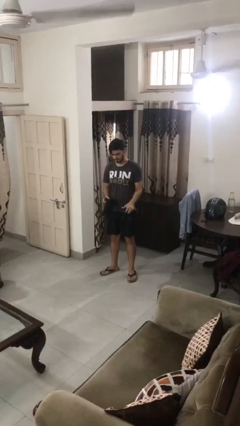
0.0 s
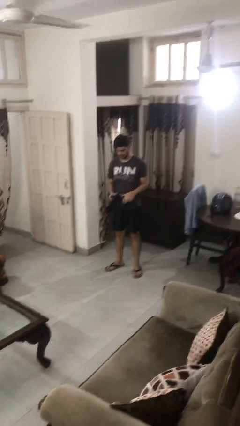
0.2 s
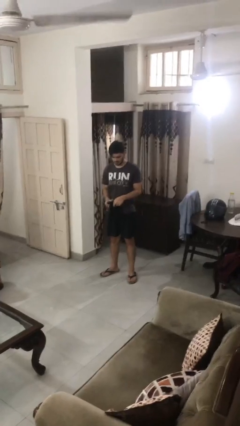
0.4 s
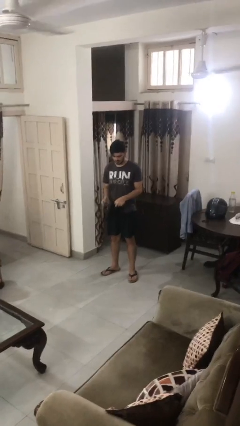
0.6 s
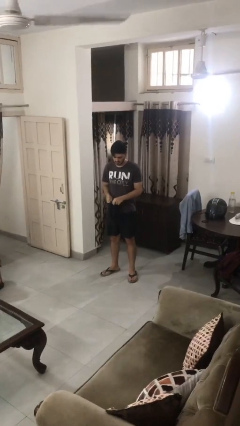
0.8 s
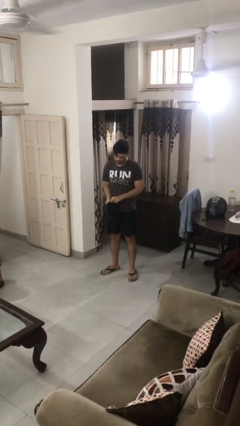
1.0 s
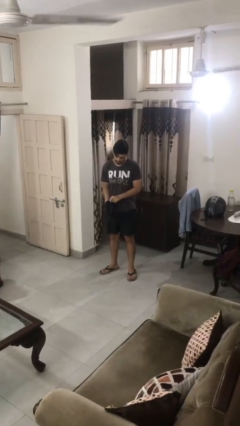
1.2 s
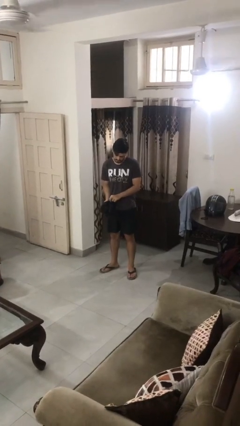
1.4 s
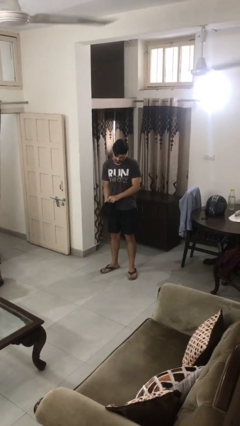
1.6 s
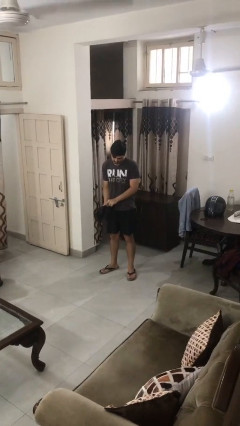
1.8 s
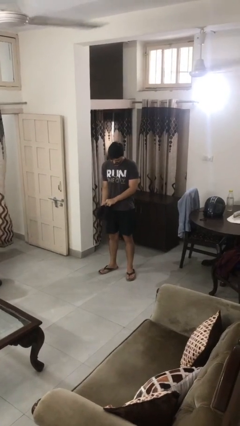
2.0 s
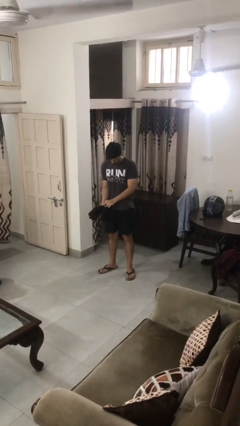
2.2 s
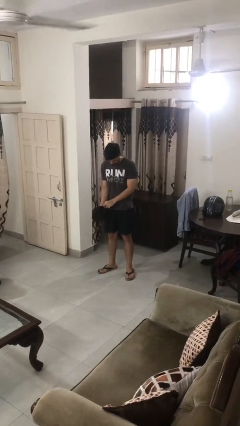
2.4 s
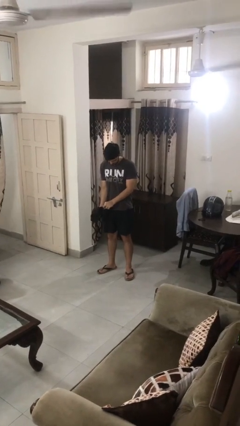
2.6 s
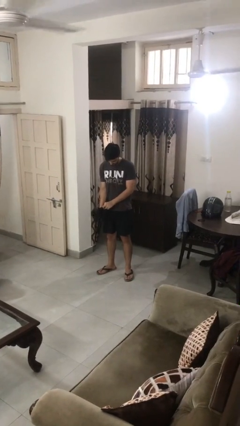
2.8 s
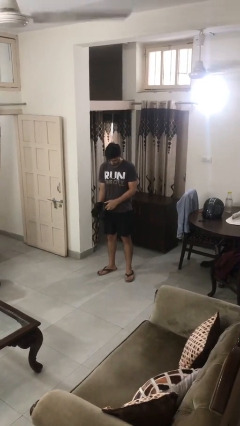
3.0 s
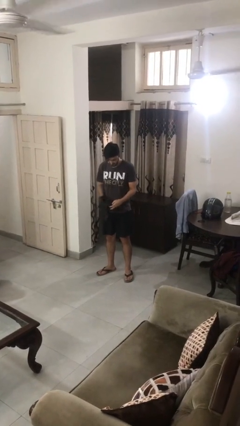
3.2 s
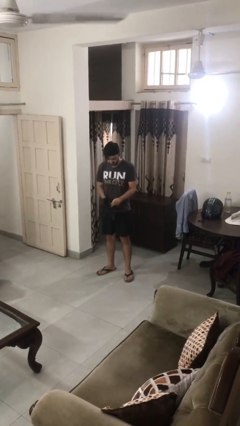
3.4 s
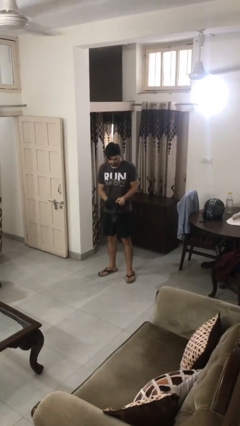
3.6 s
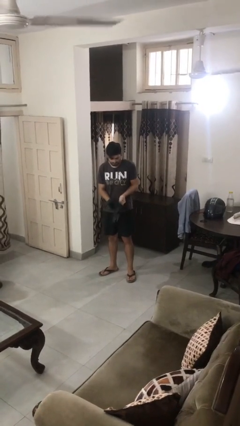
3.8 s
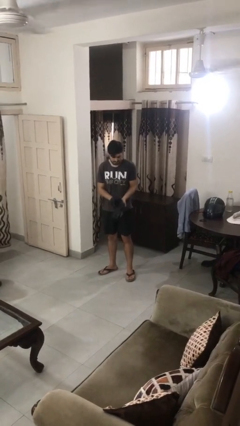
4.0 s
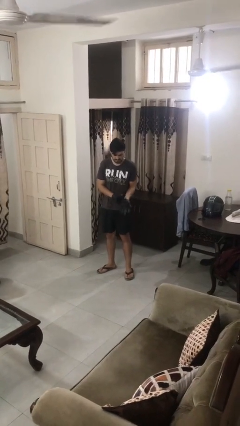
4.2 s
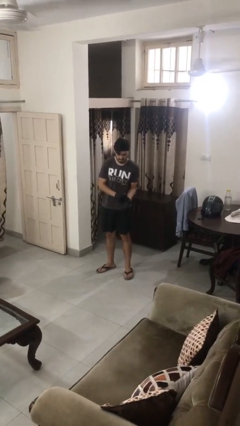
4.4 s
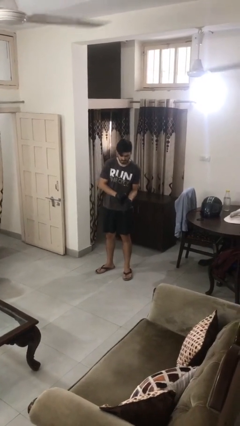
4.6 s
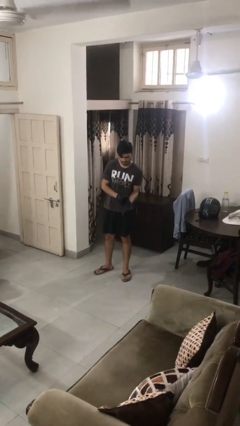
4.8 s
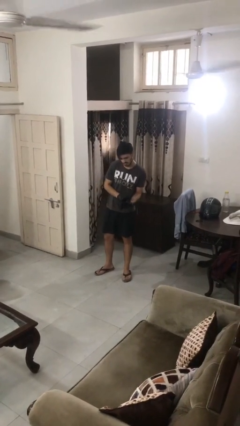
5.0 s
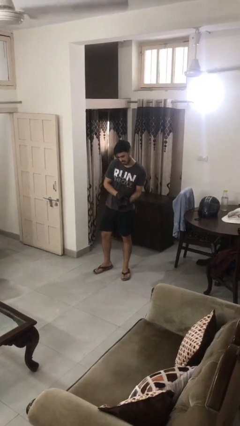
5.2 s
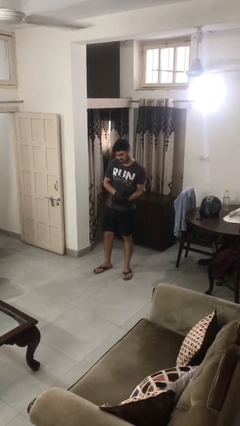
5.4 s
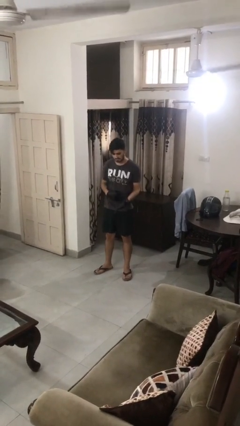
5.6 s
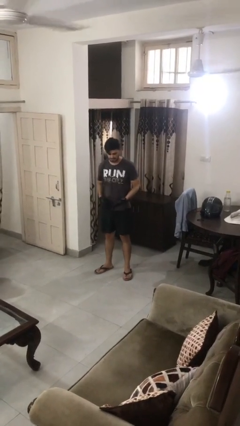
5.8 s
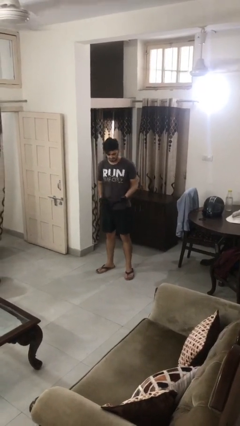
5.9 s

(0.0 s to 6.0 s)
person puts on gloves

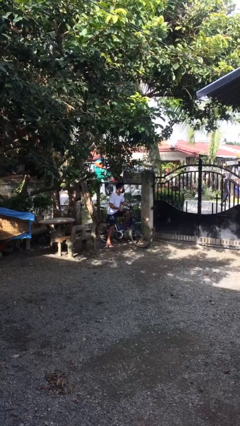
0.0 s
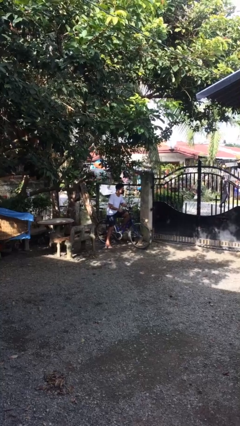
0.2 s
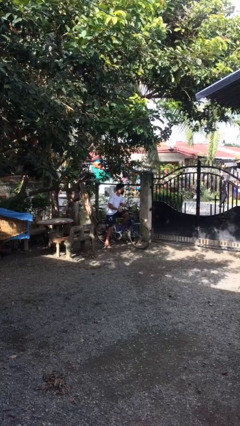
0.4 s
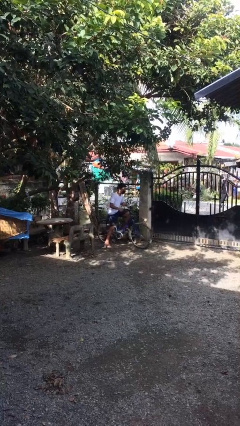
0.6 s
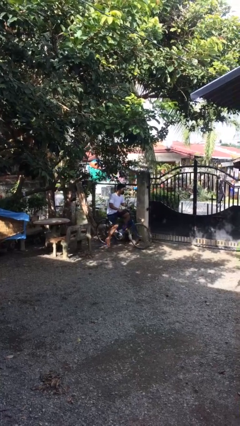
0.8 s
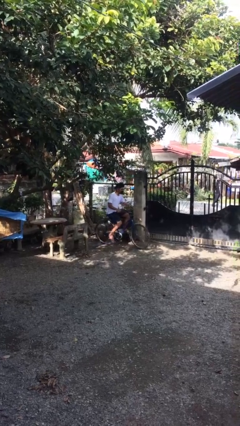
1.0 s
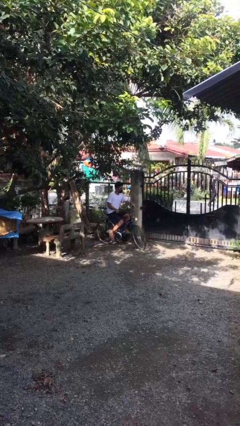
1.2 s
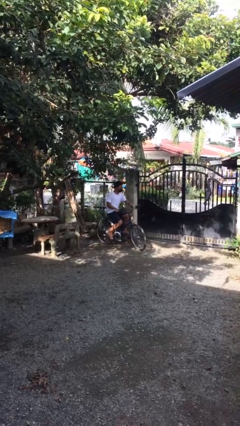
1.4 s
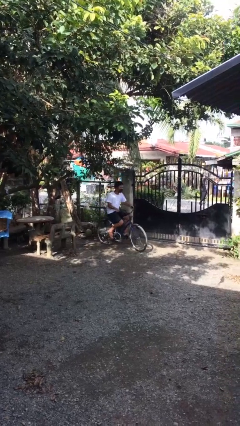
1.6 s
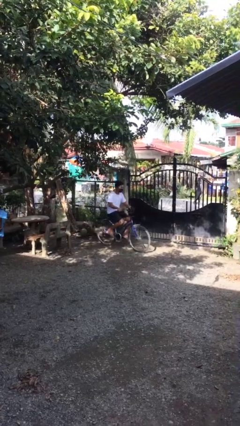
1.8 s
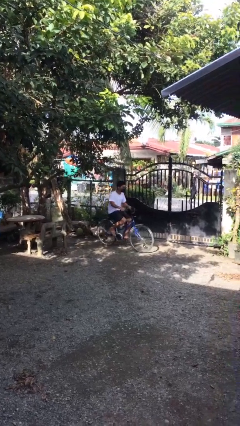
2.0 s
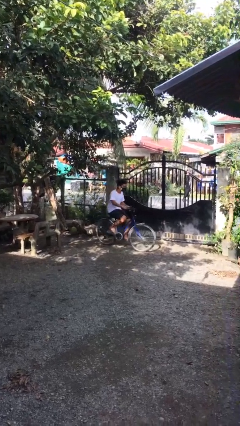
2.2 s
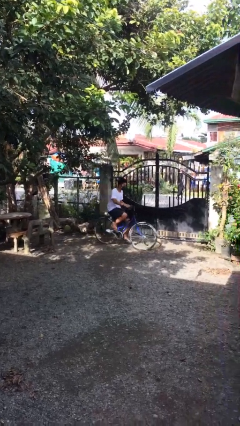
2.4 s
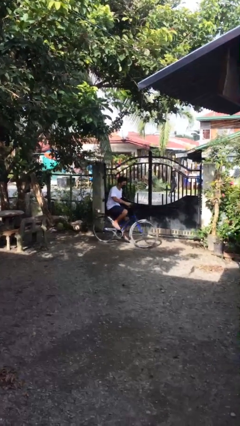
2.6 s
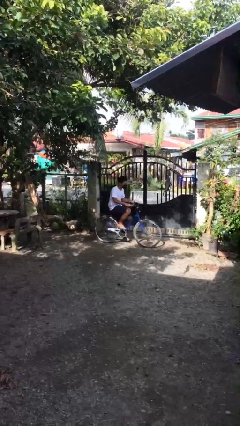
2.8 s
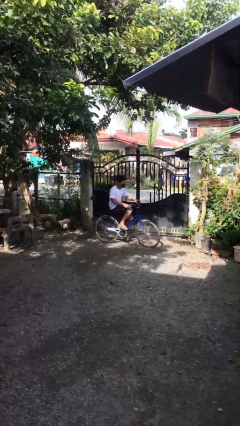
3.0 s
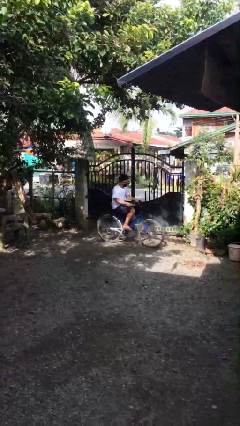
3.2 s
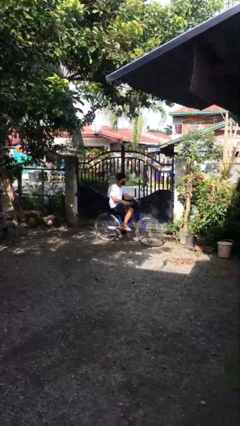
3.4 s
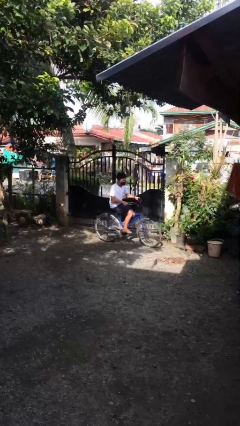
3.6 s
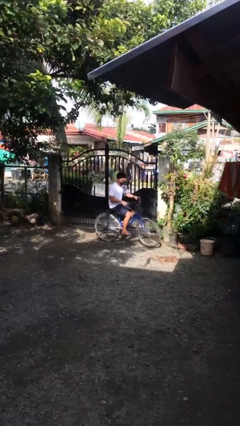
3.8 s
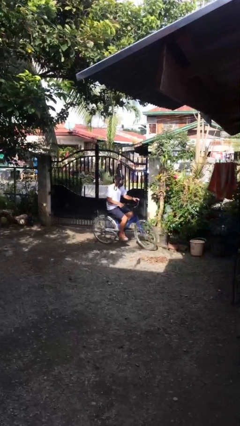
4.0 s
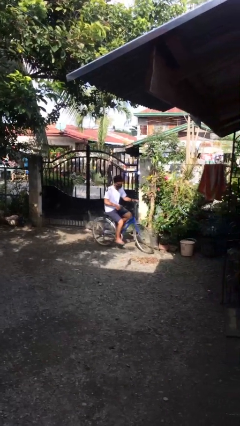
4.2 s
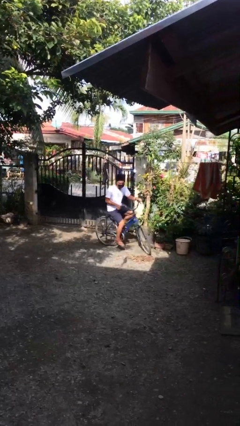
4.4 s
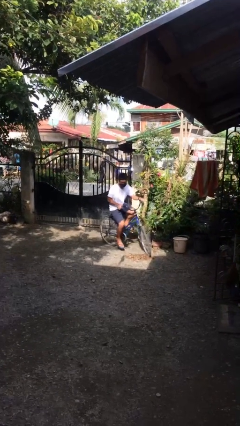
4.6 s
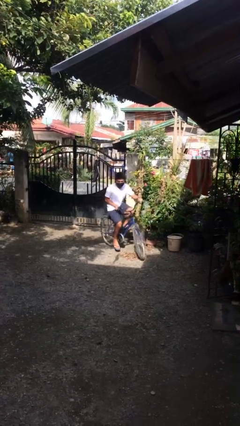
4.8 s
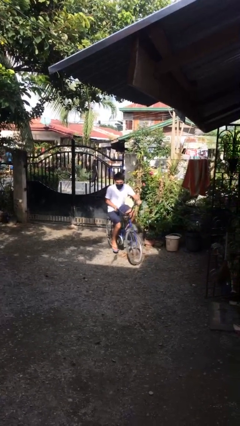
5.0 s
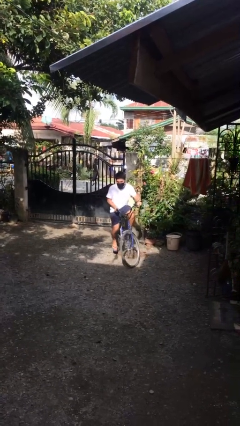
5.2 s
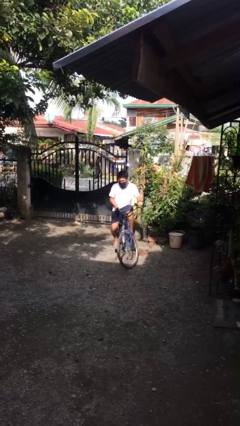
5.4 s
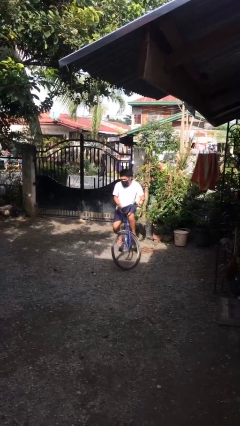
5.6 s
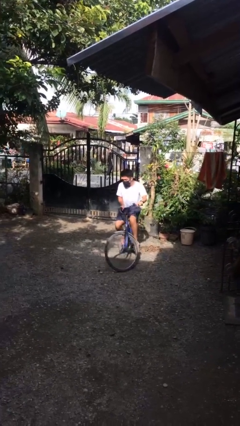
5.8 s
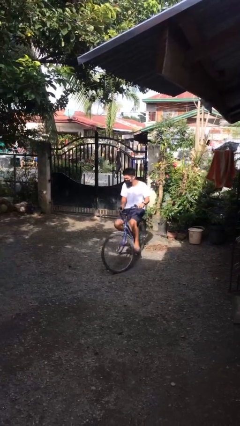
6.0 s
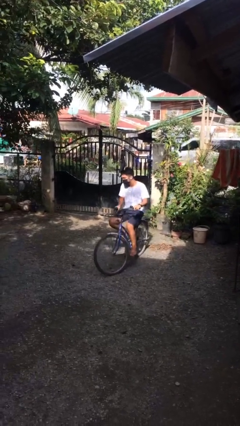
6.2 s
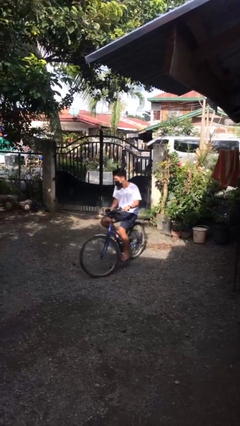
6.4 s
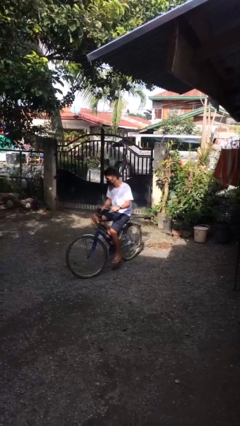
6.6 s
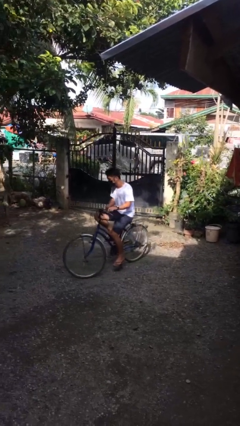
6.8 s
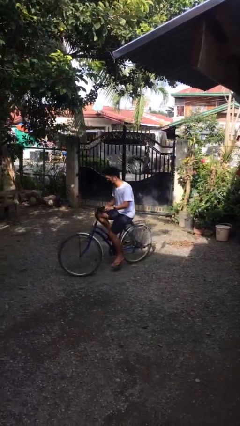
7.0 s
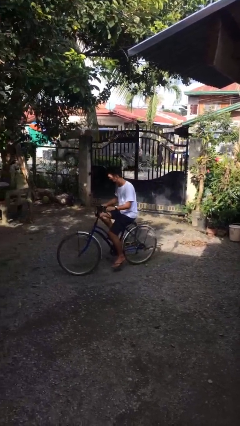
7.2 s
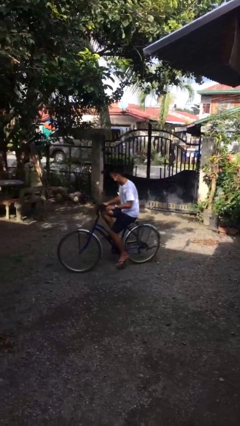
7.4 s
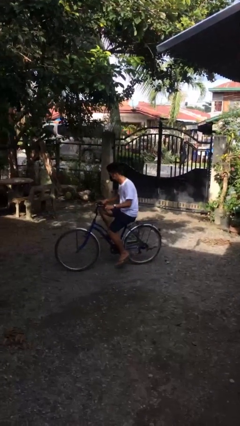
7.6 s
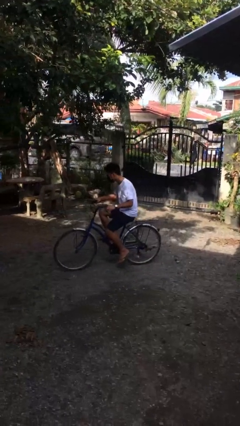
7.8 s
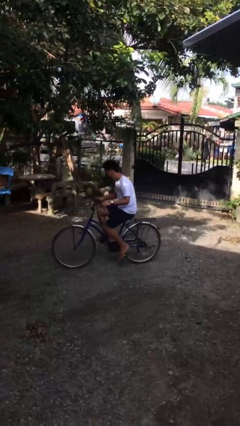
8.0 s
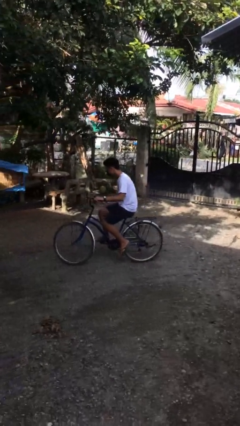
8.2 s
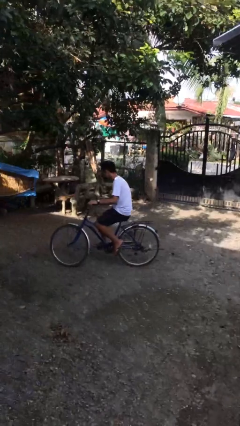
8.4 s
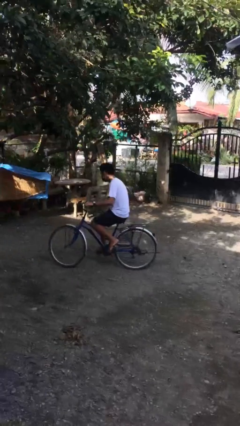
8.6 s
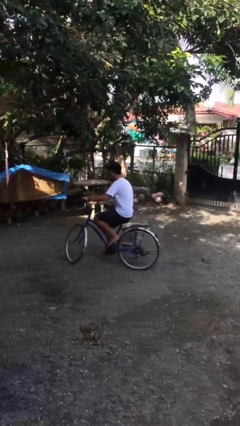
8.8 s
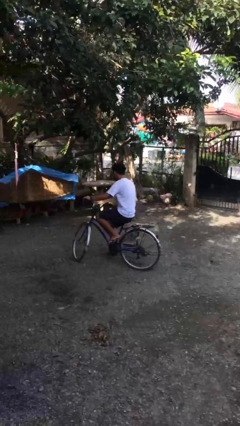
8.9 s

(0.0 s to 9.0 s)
person rides bicycle

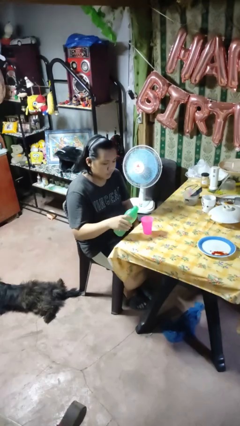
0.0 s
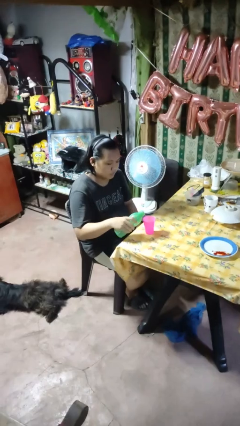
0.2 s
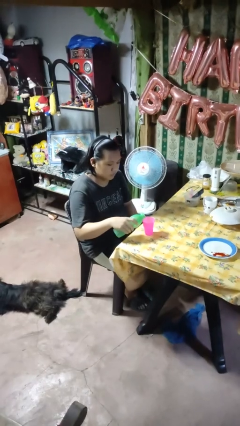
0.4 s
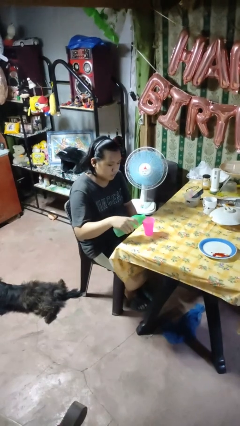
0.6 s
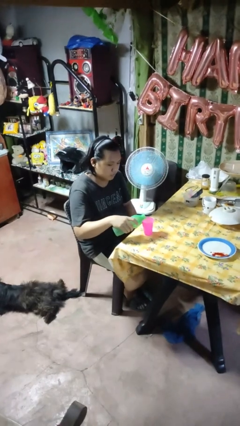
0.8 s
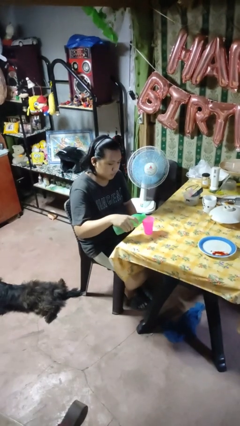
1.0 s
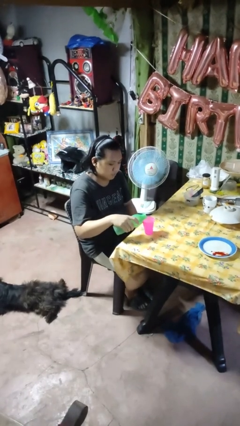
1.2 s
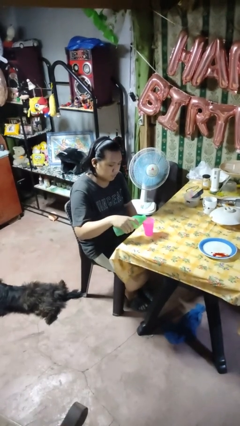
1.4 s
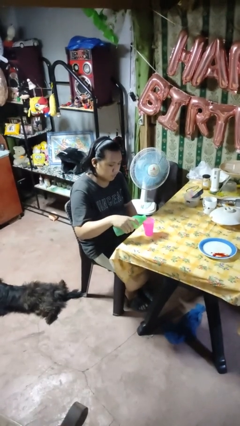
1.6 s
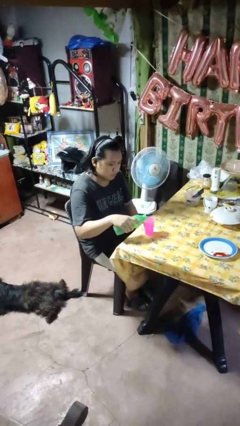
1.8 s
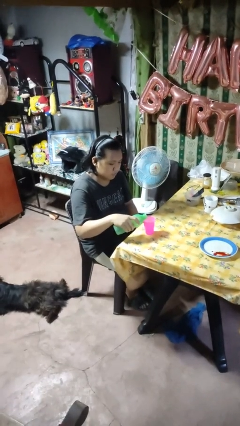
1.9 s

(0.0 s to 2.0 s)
person pours liquid into cup

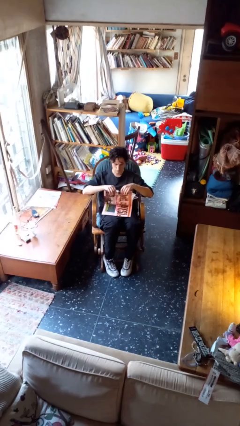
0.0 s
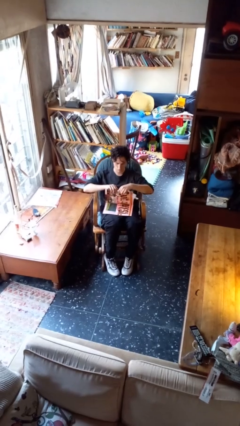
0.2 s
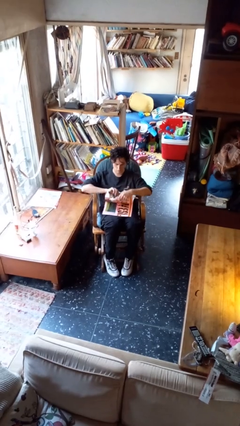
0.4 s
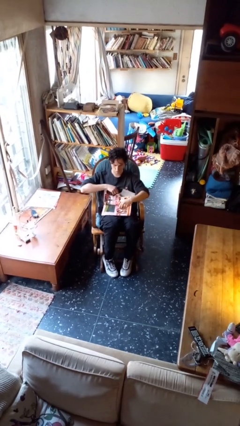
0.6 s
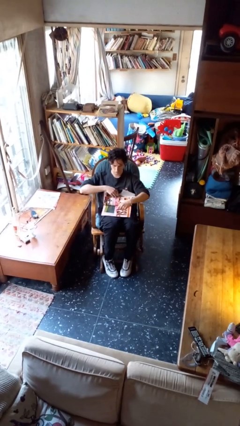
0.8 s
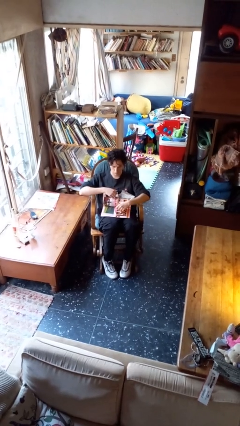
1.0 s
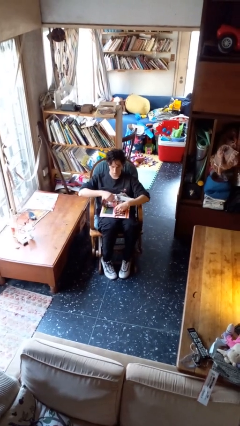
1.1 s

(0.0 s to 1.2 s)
person tears paper
